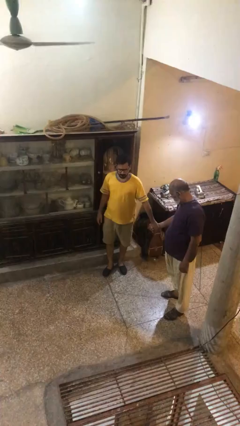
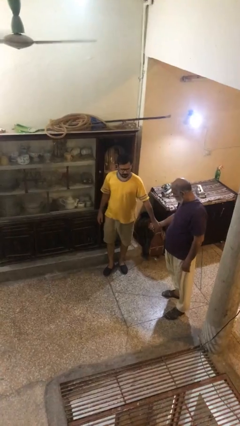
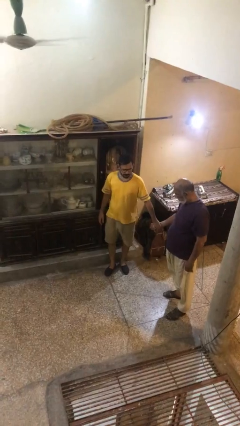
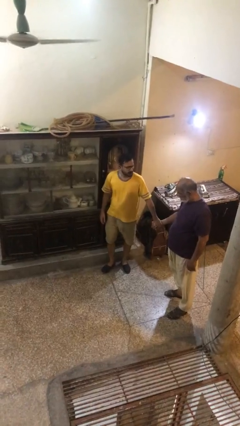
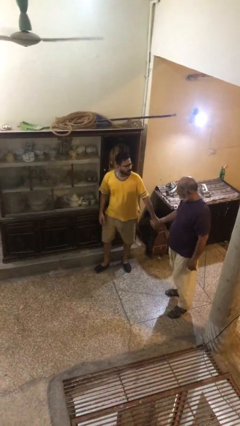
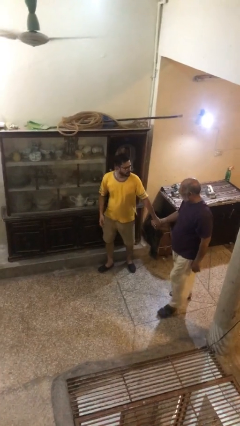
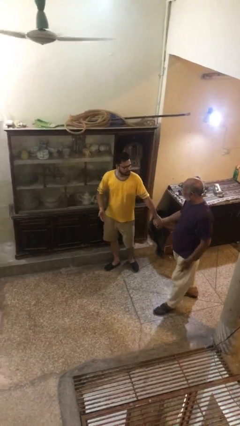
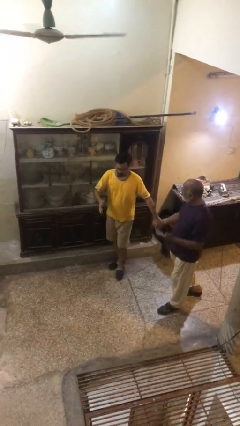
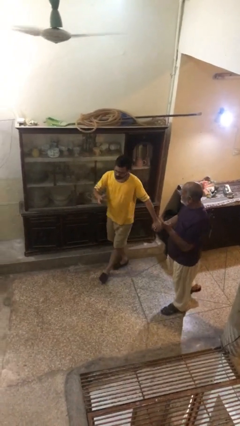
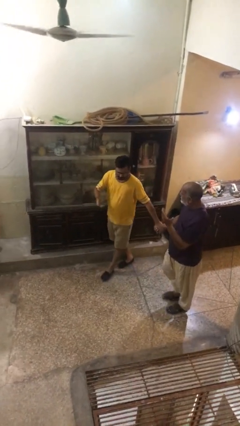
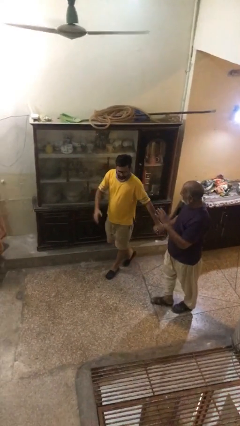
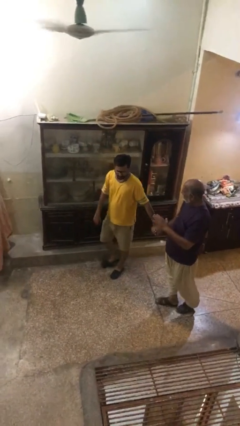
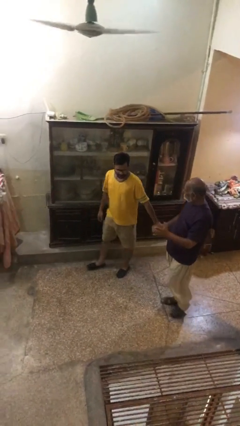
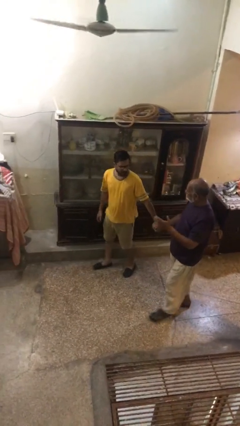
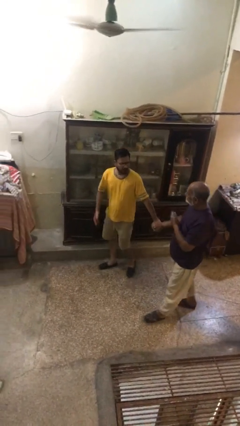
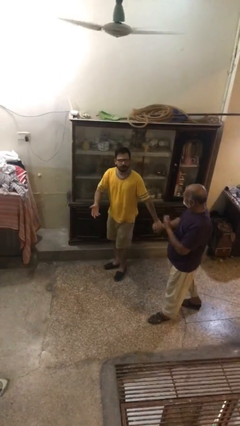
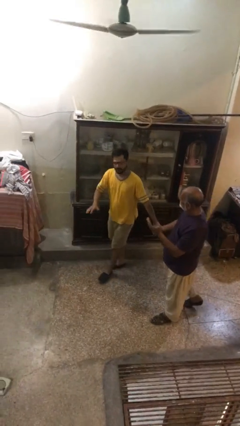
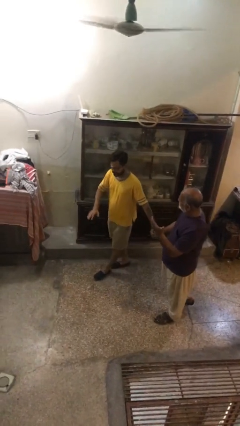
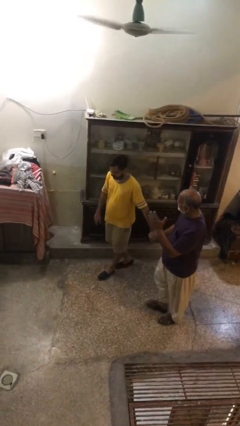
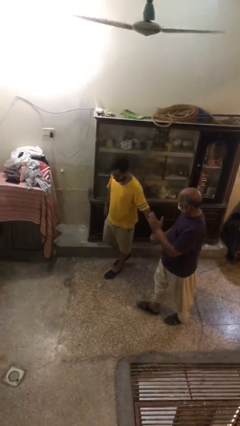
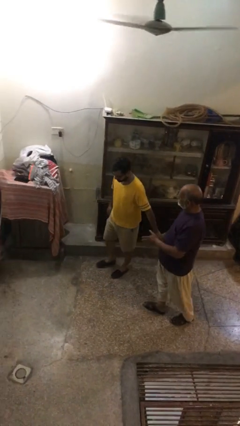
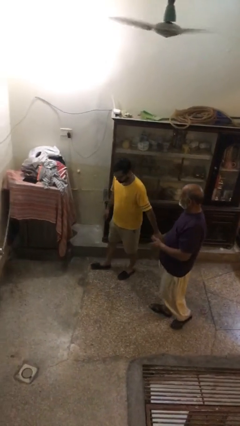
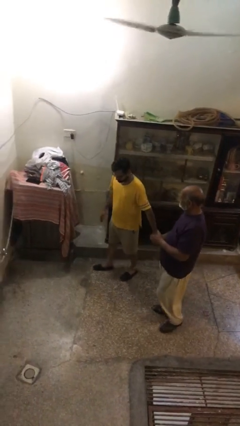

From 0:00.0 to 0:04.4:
person holds hand

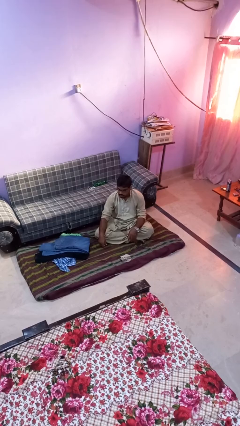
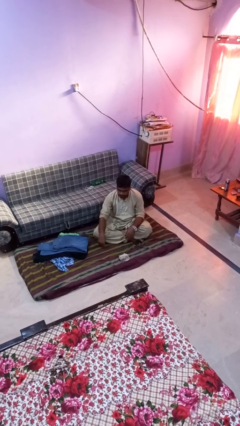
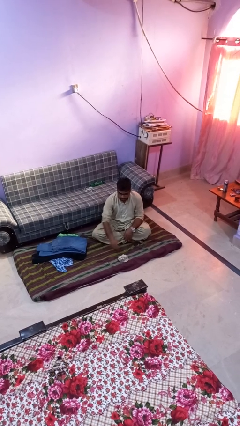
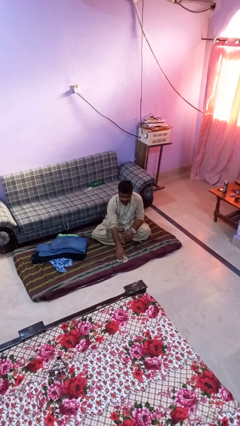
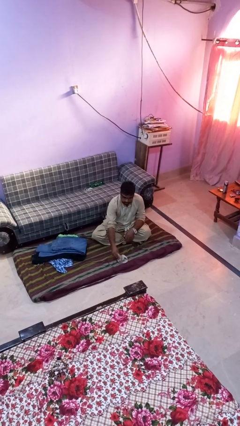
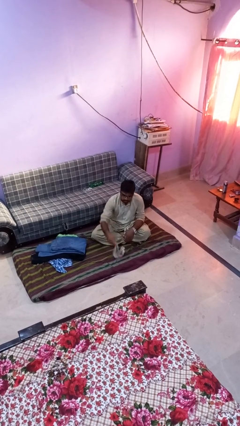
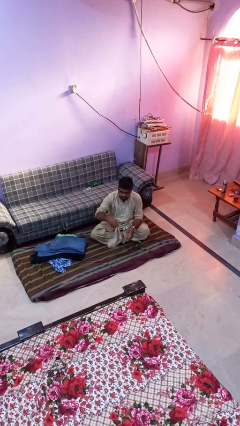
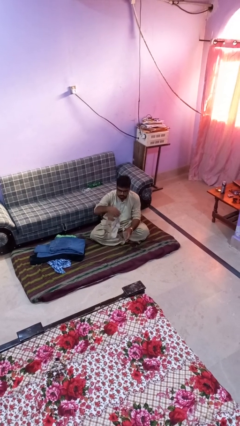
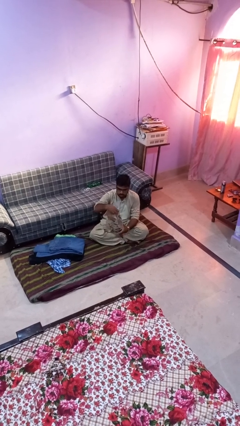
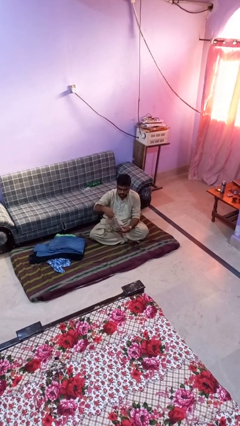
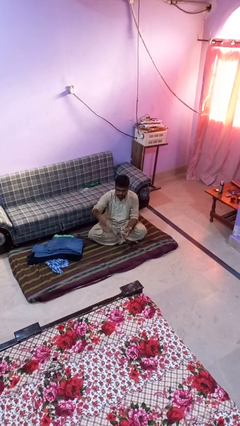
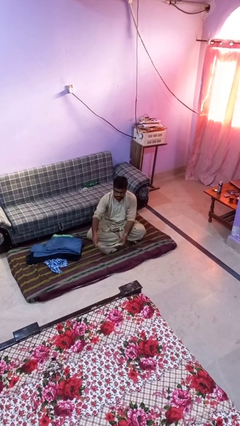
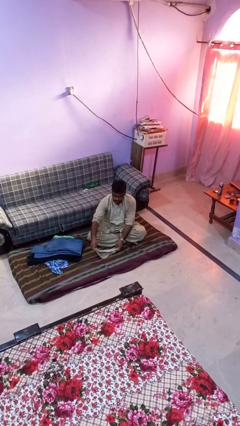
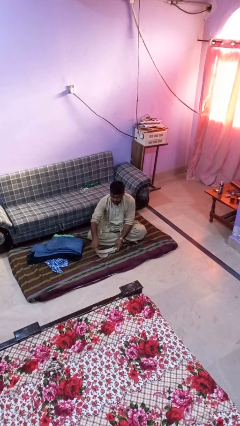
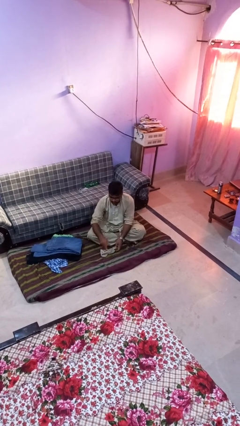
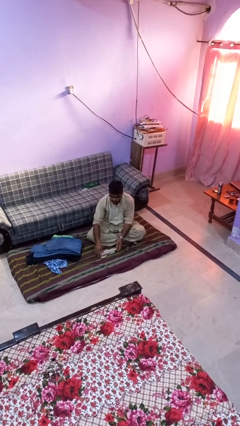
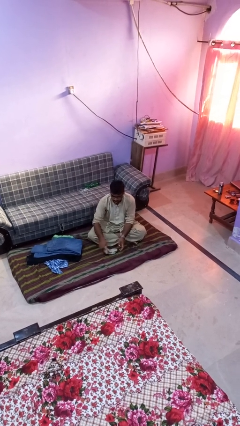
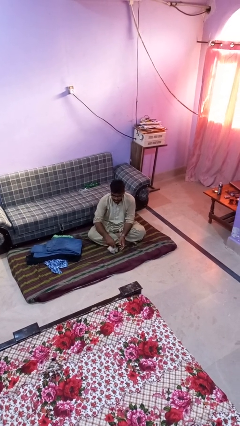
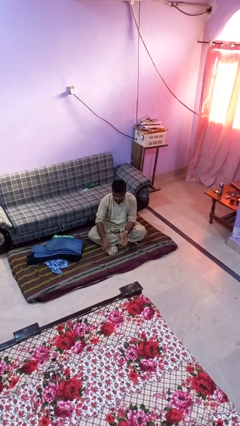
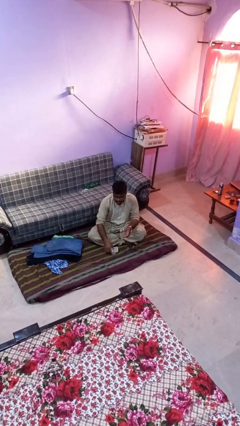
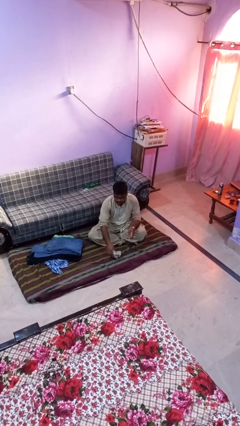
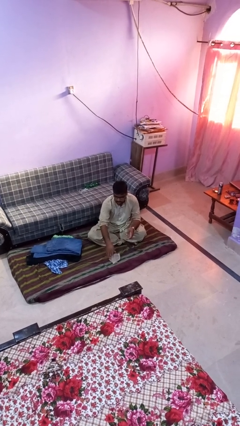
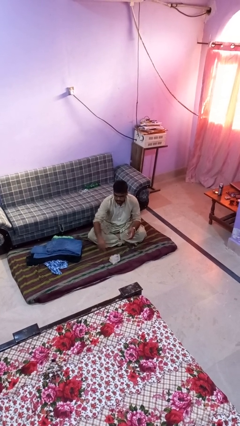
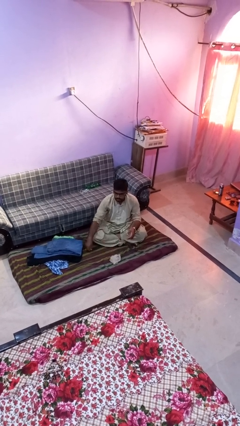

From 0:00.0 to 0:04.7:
person folds socks

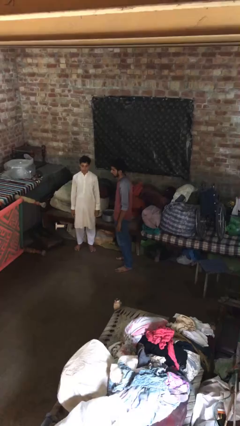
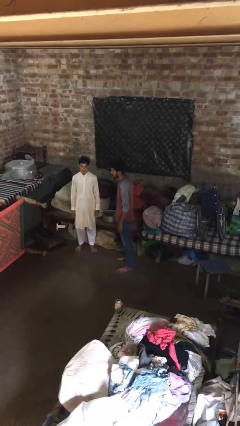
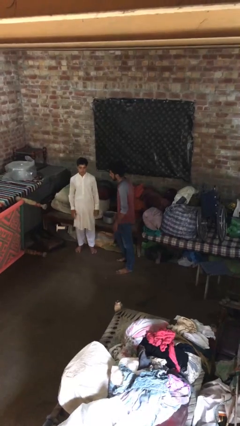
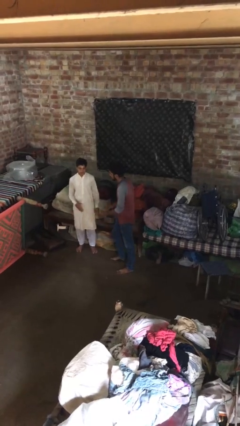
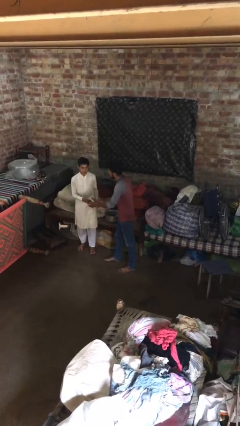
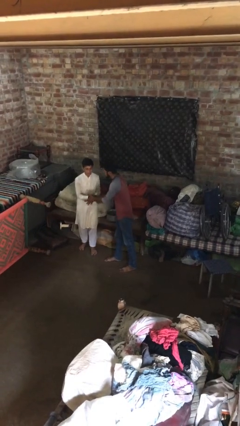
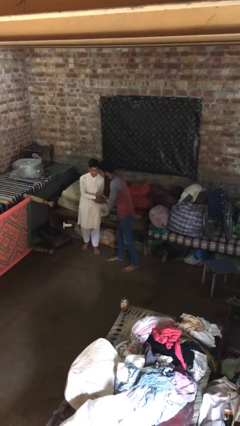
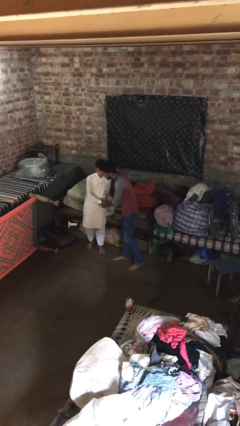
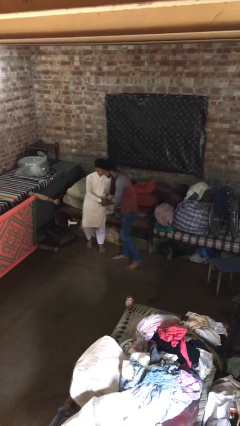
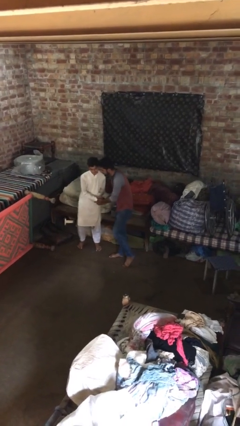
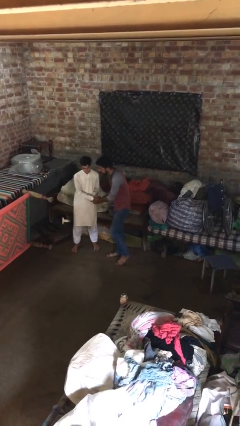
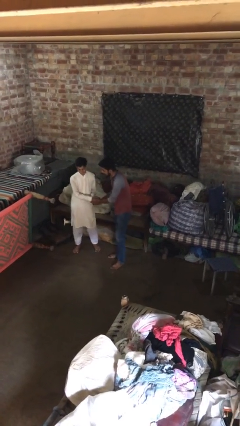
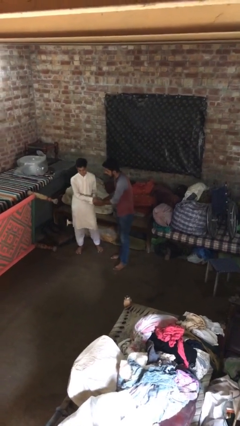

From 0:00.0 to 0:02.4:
person shakes hand

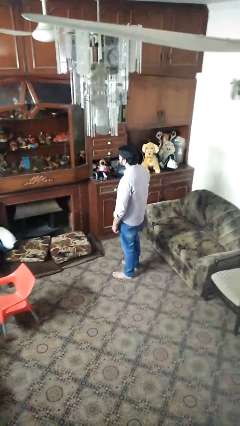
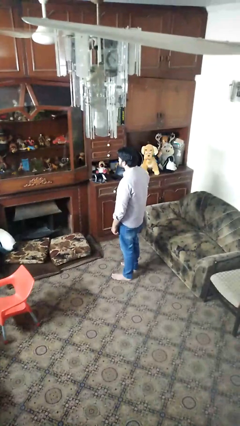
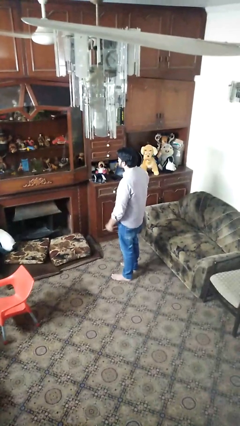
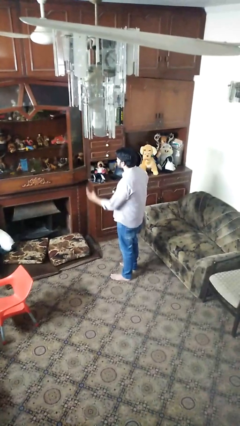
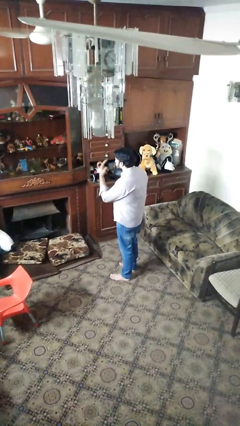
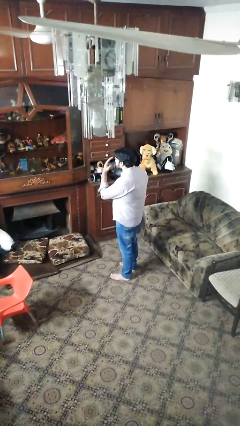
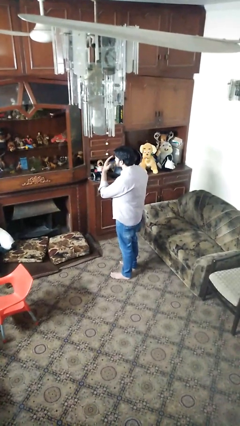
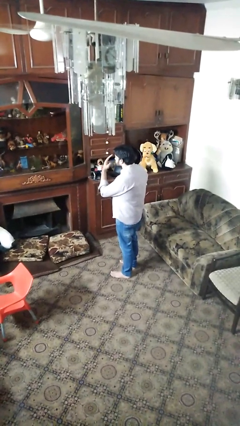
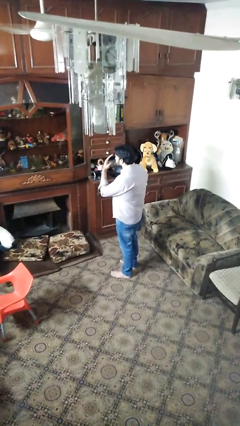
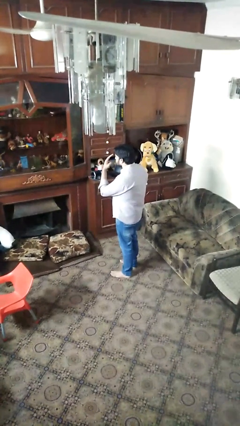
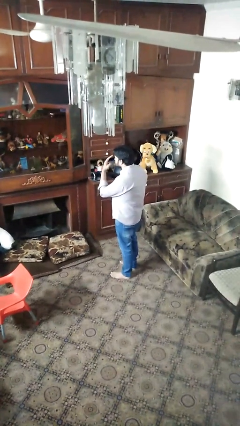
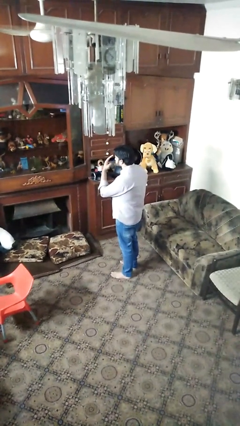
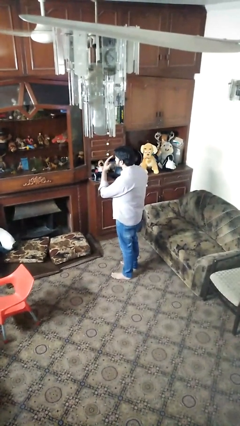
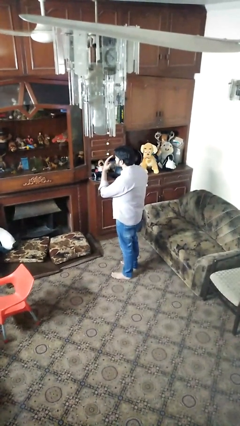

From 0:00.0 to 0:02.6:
person gestures watch closely

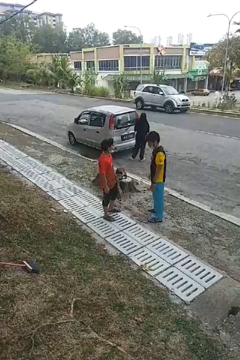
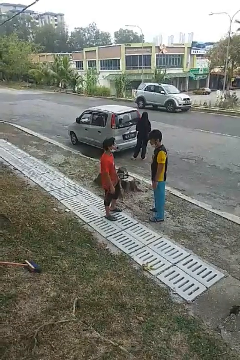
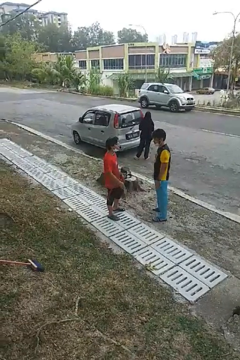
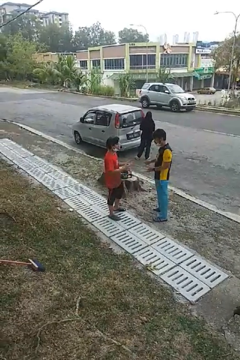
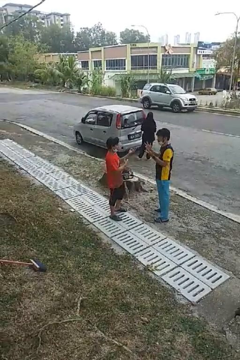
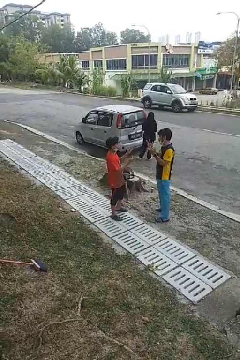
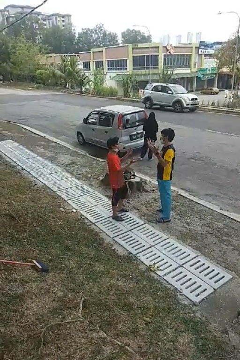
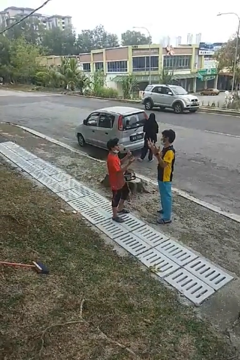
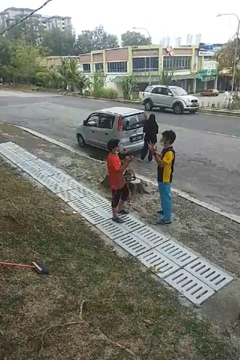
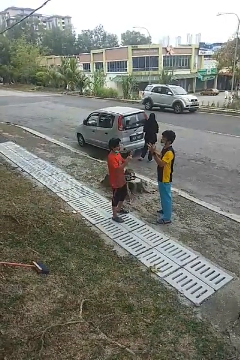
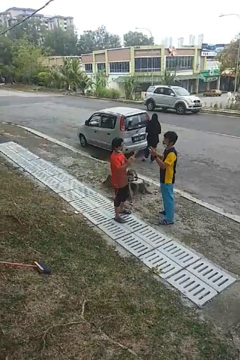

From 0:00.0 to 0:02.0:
person talks to person

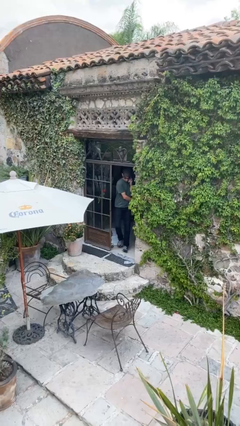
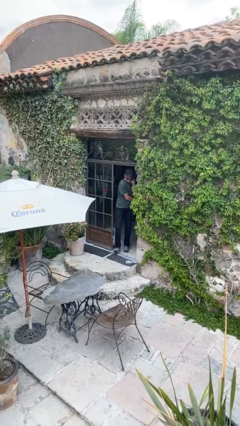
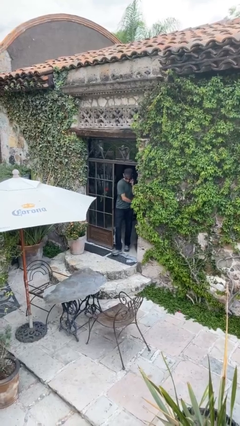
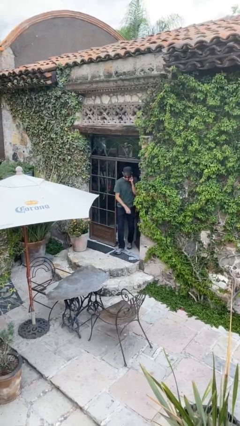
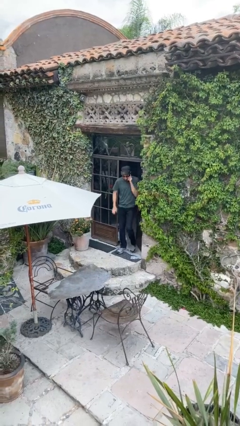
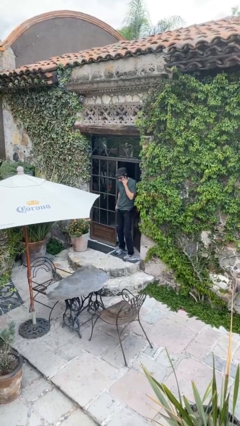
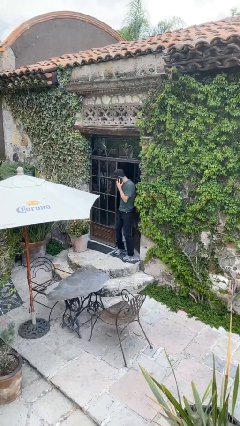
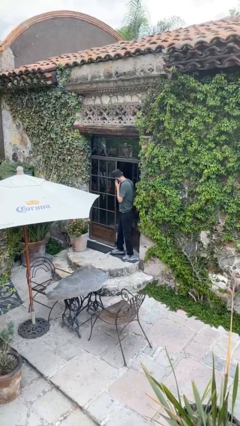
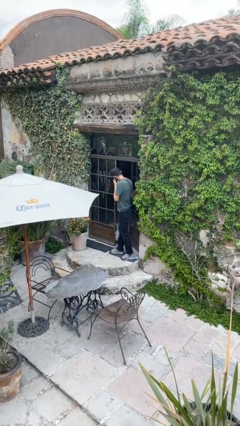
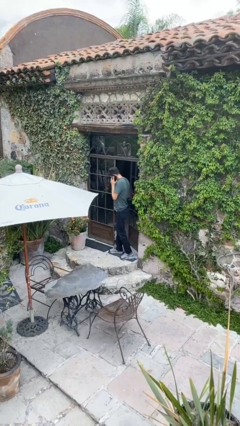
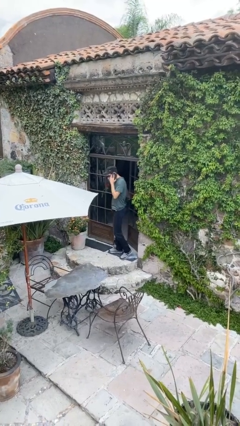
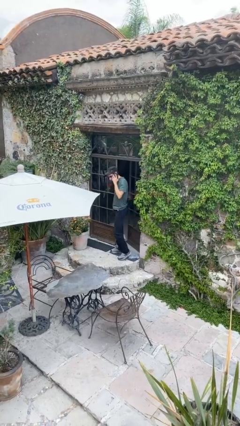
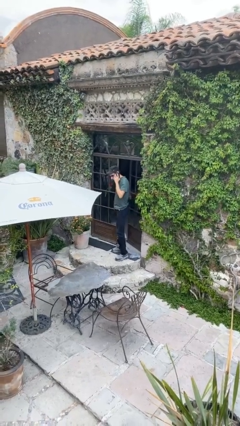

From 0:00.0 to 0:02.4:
person enters scene through structure
